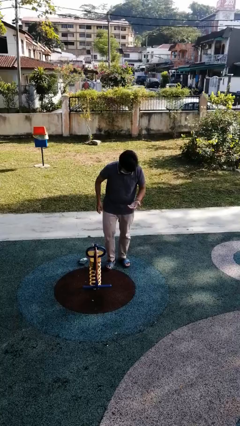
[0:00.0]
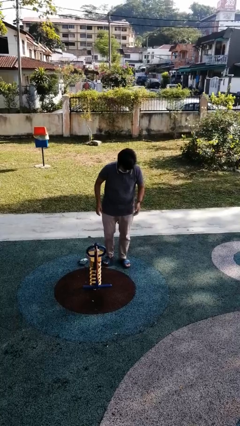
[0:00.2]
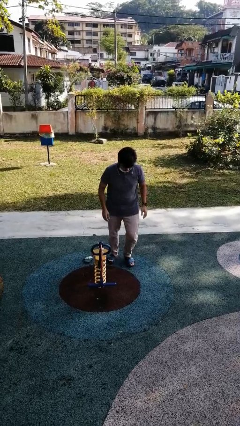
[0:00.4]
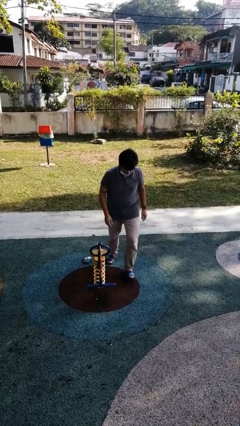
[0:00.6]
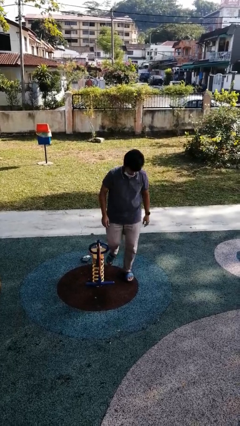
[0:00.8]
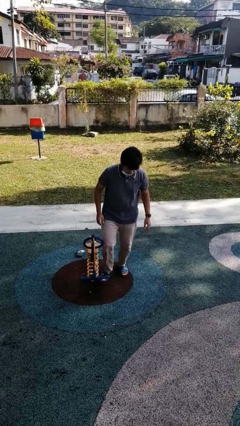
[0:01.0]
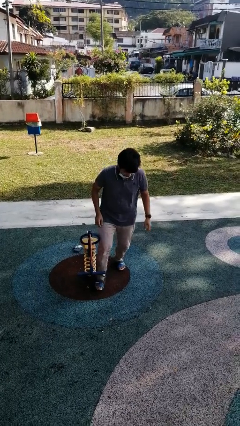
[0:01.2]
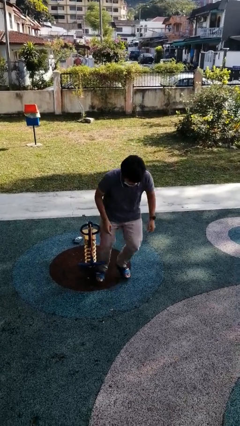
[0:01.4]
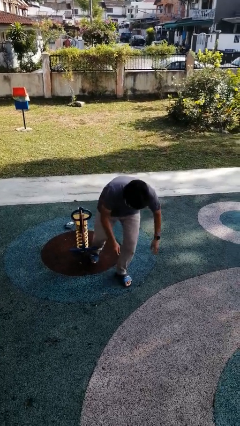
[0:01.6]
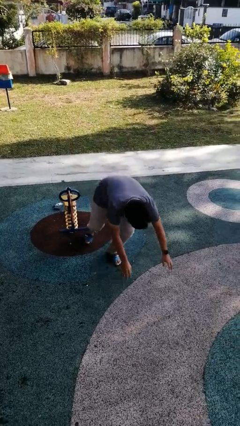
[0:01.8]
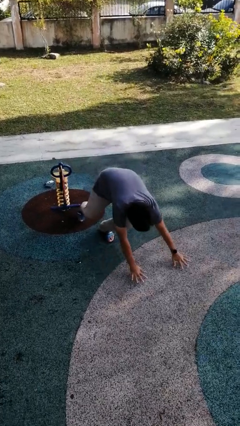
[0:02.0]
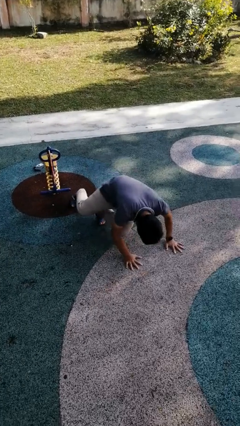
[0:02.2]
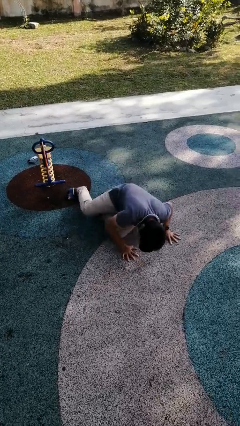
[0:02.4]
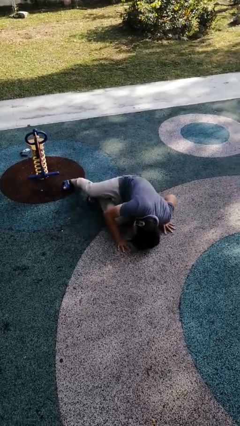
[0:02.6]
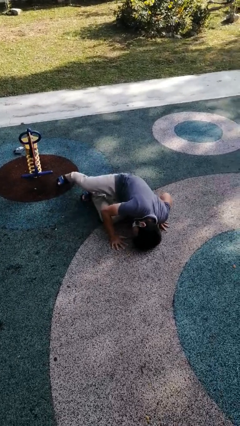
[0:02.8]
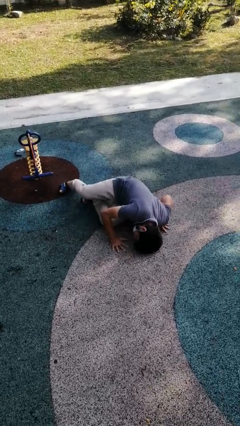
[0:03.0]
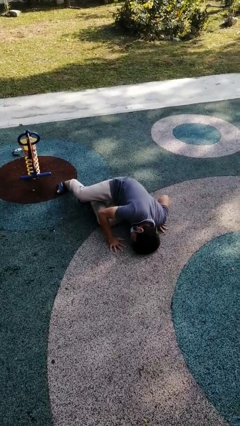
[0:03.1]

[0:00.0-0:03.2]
person trips on object on floor

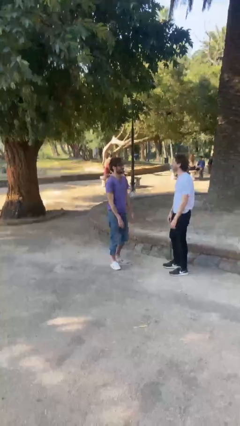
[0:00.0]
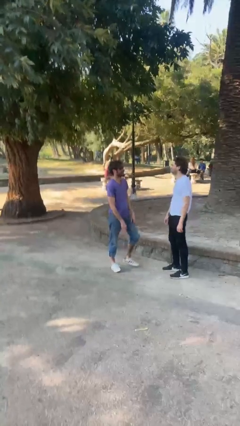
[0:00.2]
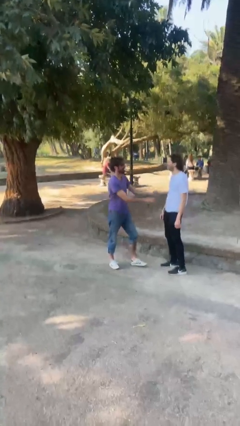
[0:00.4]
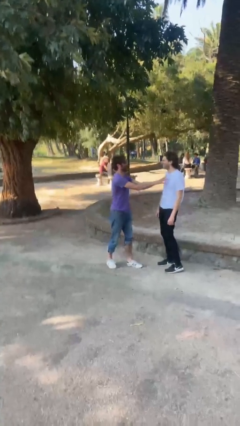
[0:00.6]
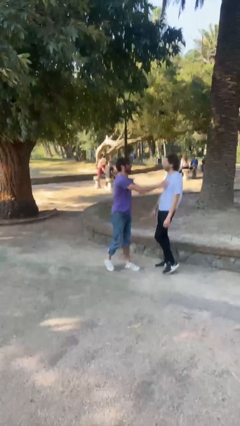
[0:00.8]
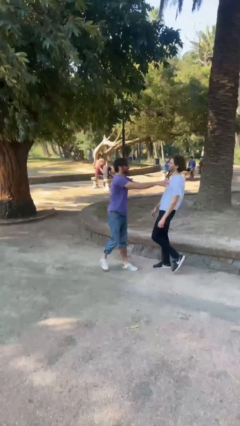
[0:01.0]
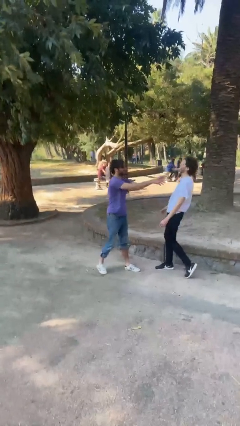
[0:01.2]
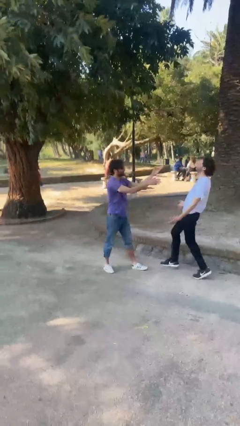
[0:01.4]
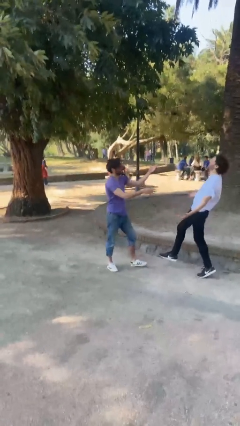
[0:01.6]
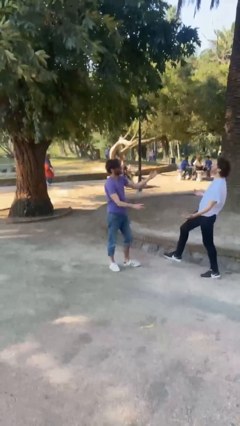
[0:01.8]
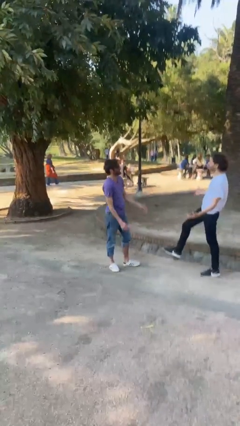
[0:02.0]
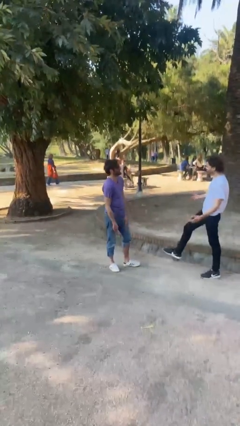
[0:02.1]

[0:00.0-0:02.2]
person shoves person

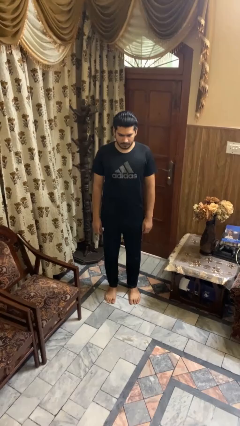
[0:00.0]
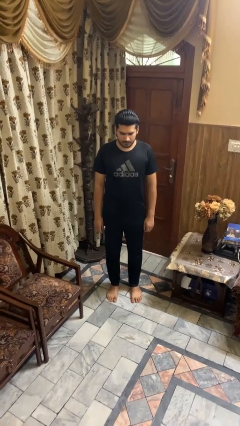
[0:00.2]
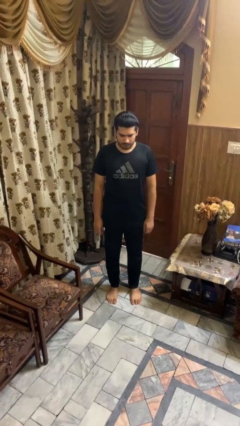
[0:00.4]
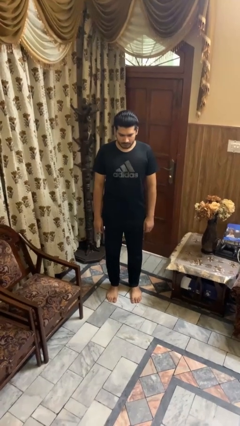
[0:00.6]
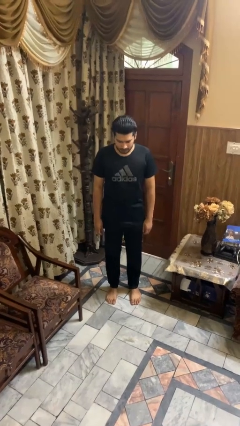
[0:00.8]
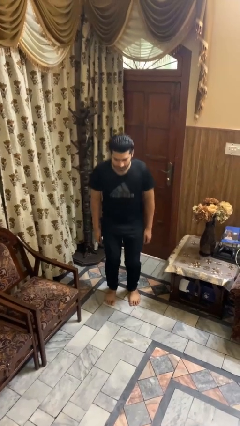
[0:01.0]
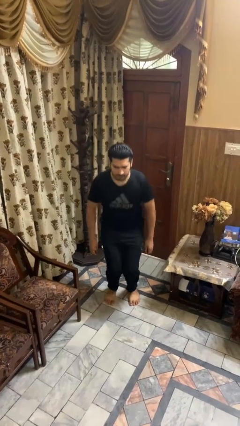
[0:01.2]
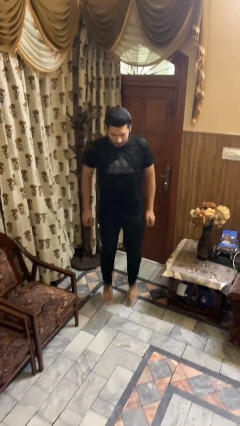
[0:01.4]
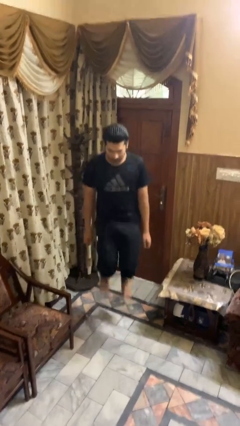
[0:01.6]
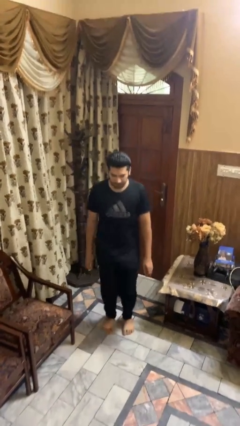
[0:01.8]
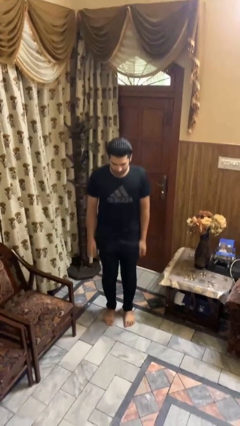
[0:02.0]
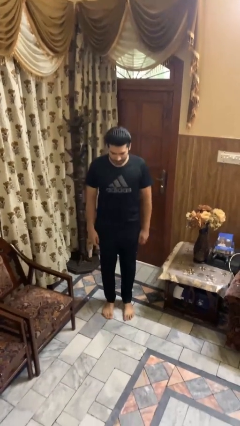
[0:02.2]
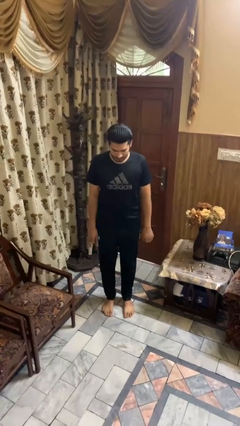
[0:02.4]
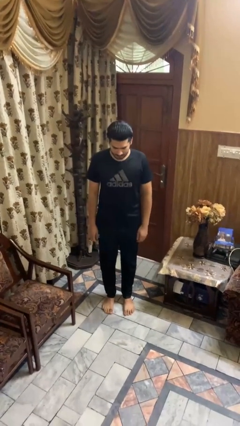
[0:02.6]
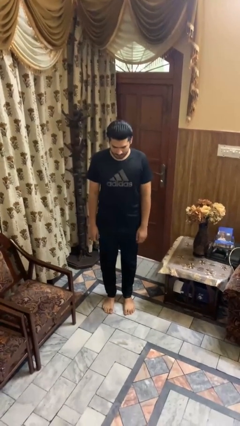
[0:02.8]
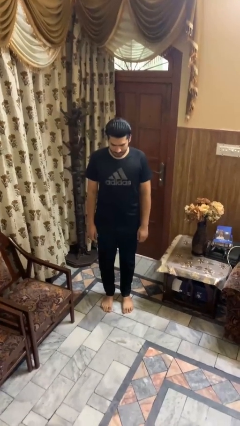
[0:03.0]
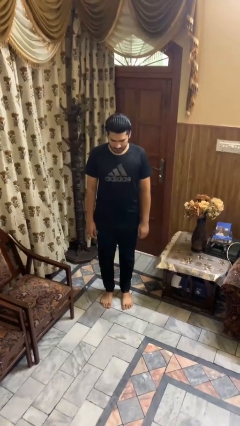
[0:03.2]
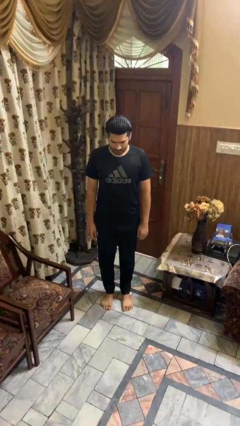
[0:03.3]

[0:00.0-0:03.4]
person jumps

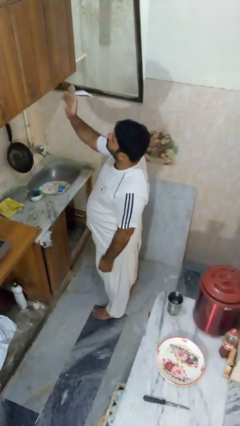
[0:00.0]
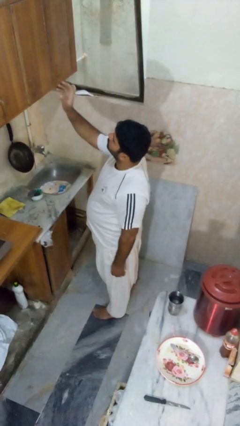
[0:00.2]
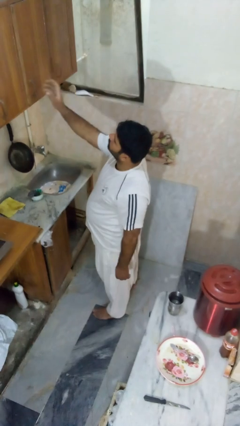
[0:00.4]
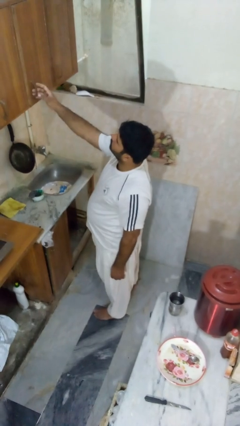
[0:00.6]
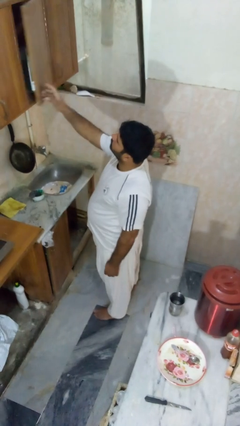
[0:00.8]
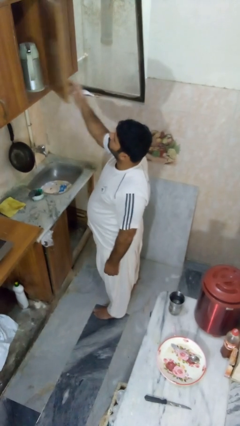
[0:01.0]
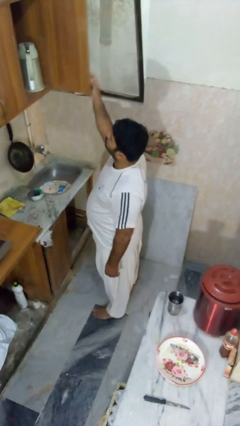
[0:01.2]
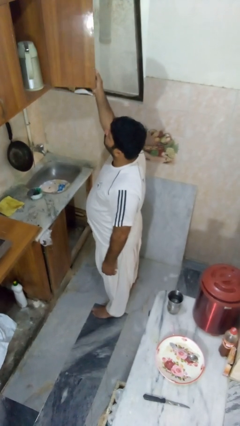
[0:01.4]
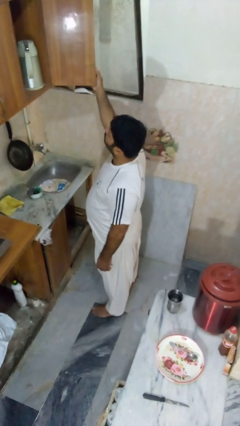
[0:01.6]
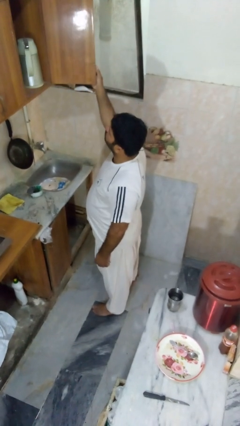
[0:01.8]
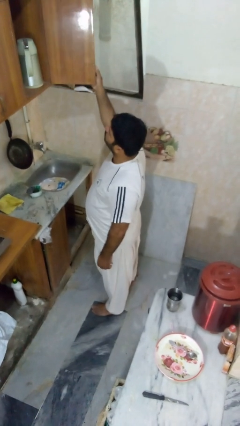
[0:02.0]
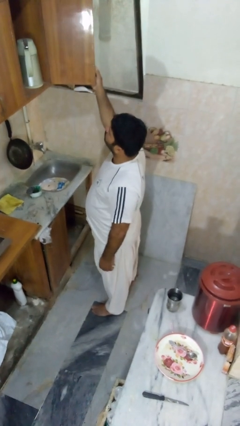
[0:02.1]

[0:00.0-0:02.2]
person opens cabinet

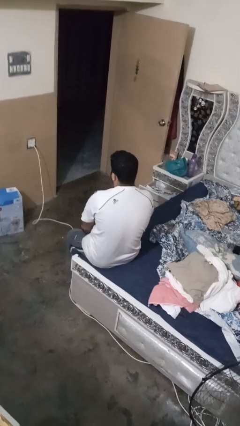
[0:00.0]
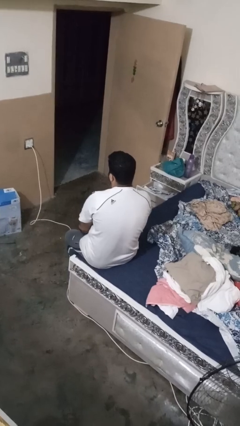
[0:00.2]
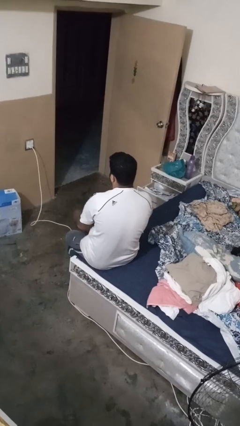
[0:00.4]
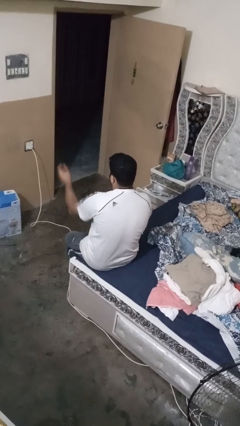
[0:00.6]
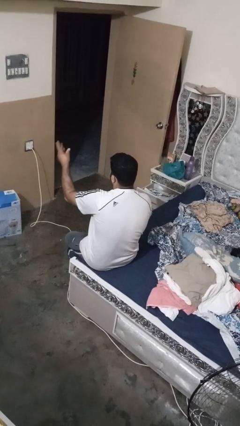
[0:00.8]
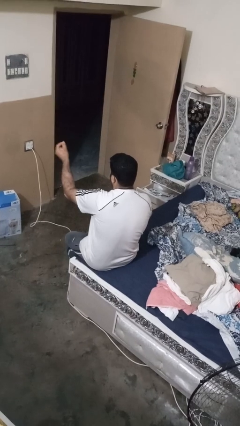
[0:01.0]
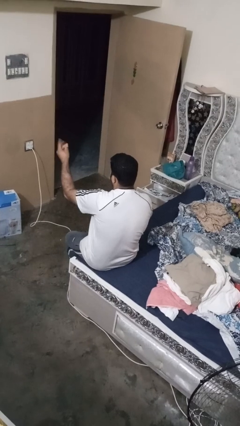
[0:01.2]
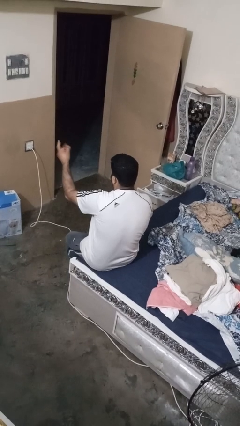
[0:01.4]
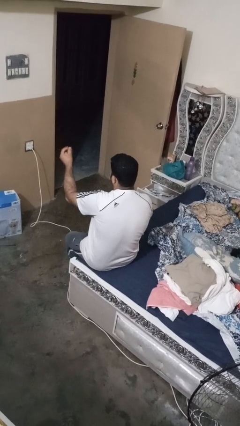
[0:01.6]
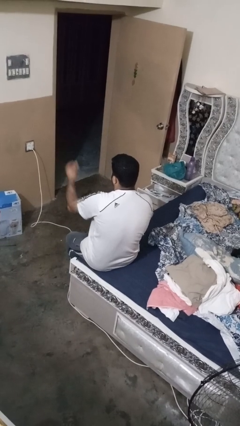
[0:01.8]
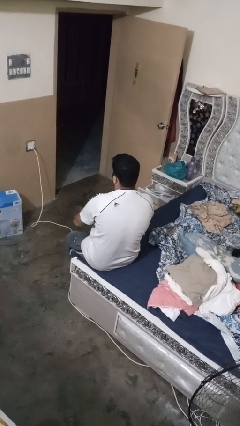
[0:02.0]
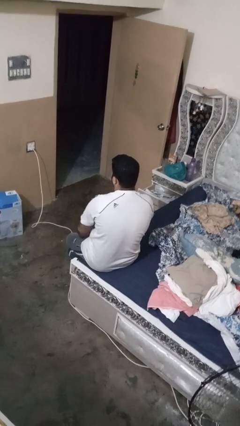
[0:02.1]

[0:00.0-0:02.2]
person snaps fingers

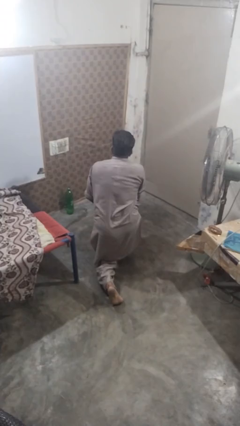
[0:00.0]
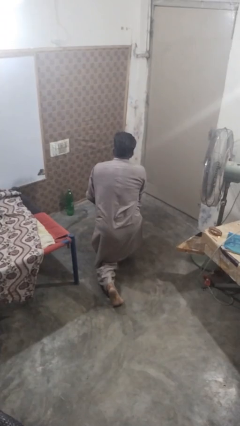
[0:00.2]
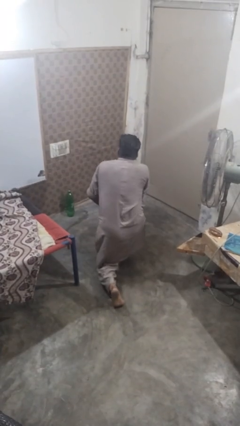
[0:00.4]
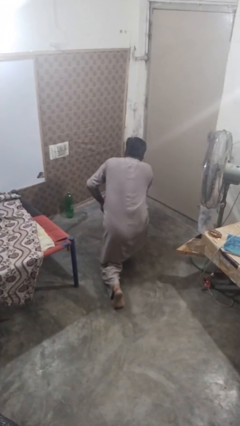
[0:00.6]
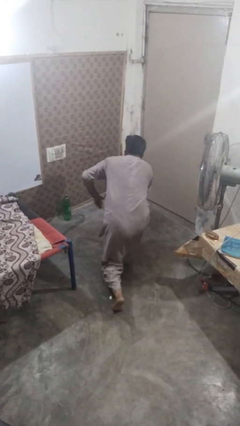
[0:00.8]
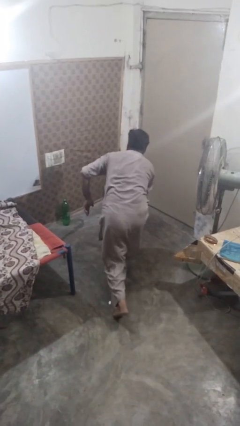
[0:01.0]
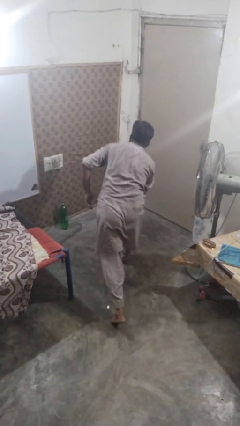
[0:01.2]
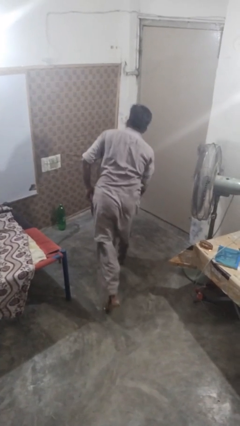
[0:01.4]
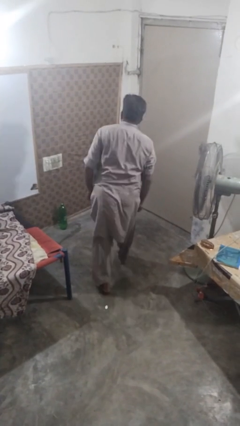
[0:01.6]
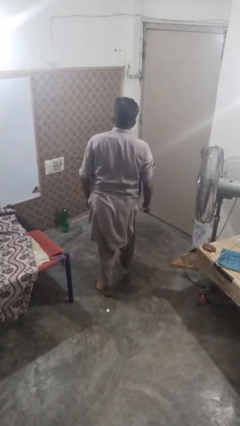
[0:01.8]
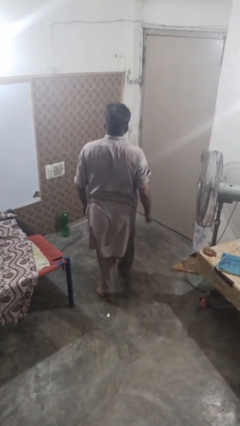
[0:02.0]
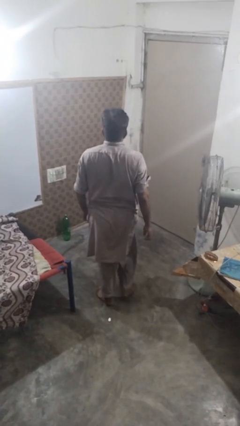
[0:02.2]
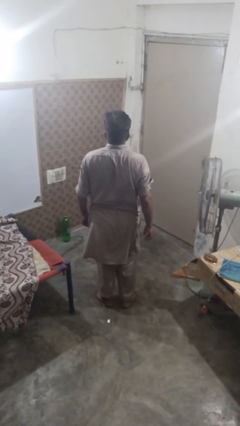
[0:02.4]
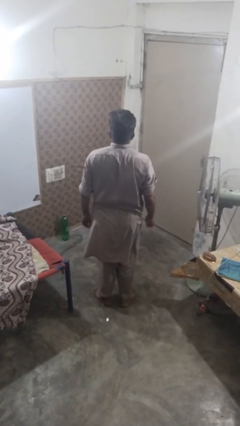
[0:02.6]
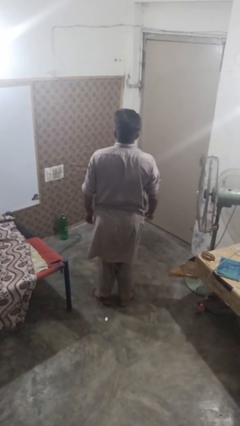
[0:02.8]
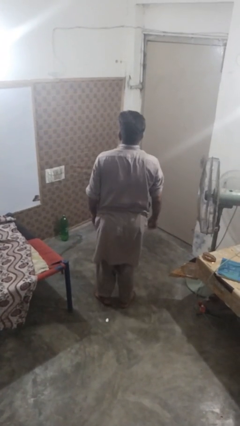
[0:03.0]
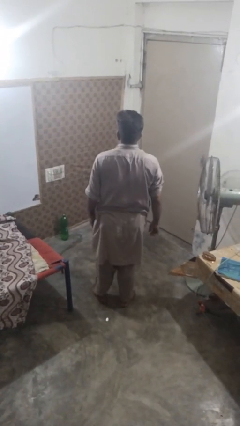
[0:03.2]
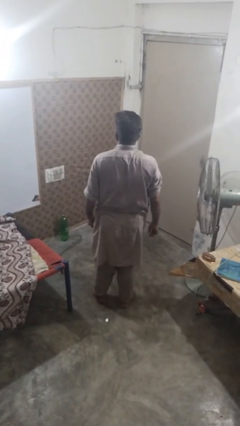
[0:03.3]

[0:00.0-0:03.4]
person stands up from floor

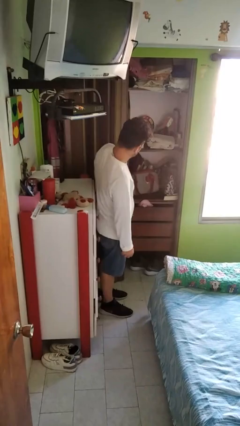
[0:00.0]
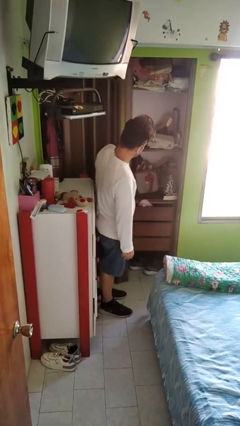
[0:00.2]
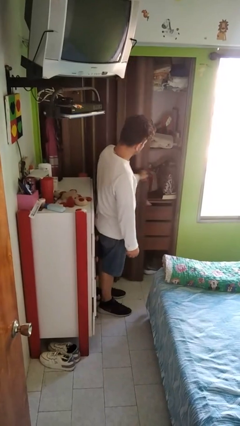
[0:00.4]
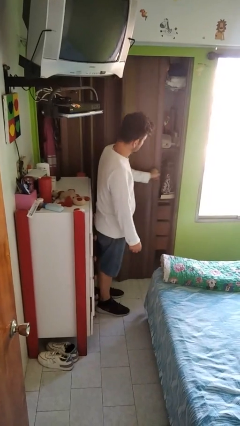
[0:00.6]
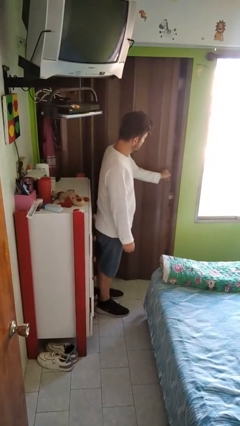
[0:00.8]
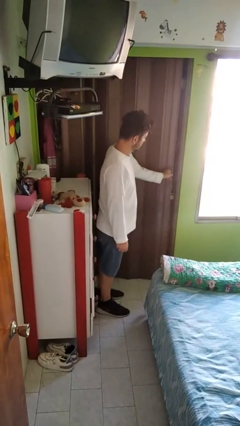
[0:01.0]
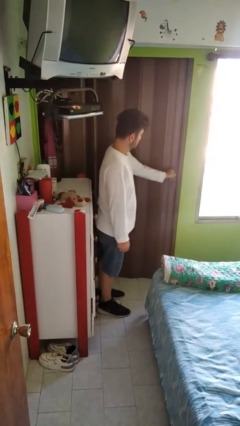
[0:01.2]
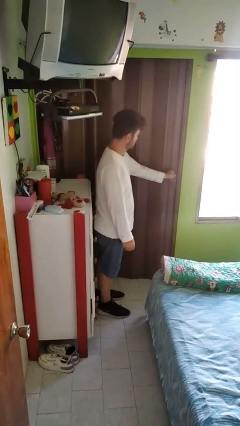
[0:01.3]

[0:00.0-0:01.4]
person closes sliding door
